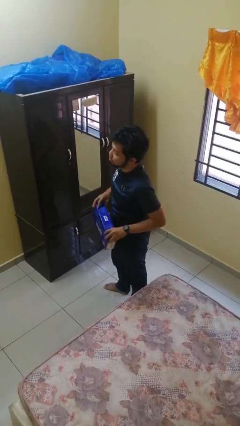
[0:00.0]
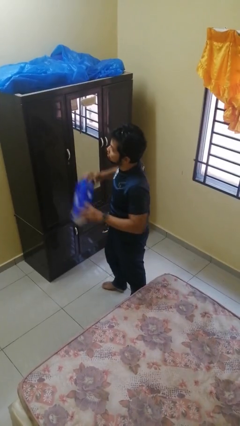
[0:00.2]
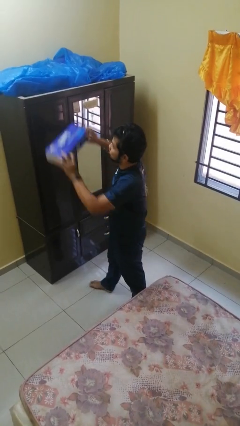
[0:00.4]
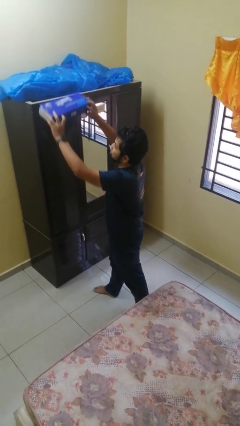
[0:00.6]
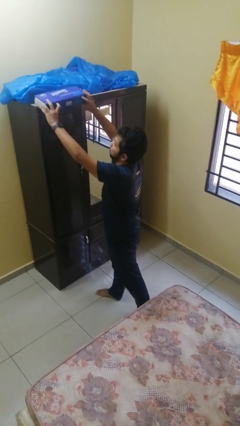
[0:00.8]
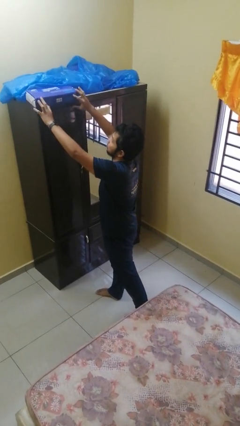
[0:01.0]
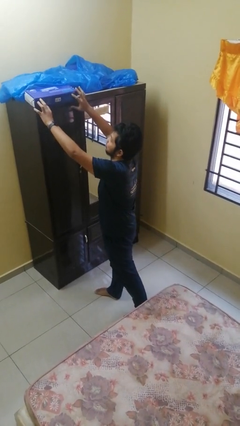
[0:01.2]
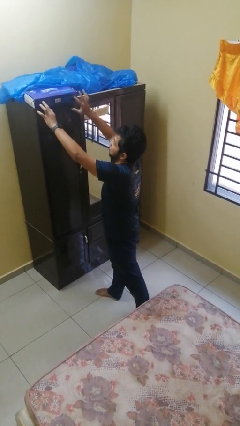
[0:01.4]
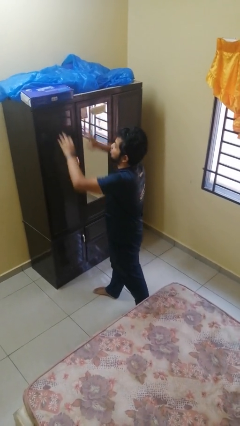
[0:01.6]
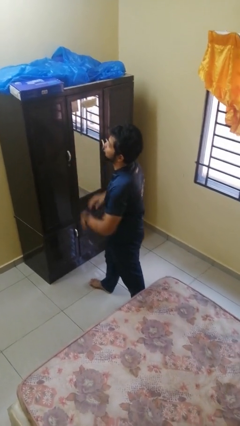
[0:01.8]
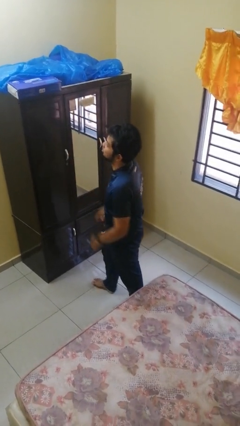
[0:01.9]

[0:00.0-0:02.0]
person puts down object on countertop

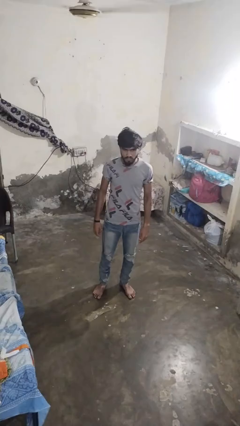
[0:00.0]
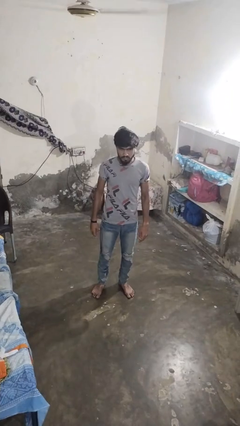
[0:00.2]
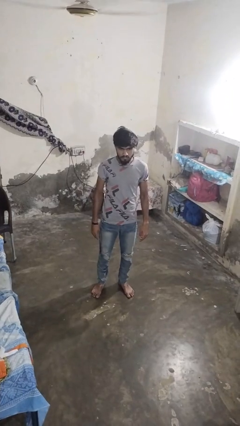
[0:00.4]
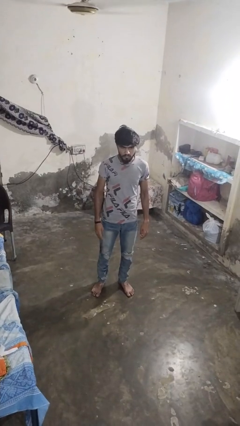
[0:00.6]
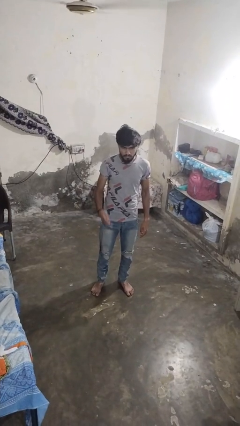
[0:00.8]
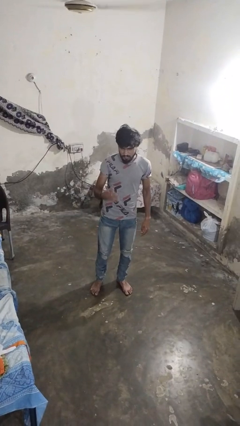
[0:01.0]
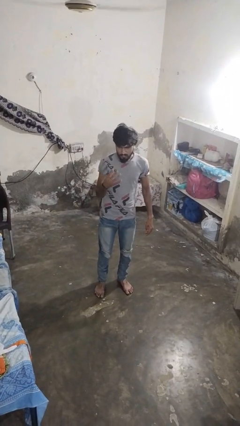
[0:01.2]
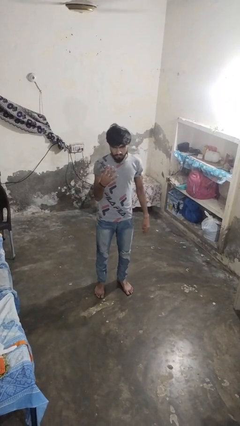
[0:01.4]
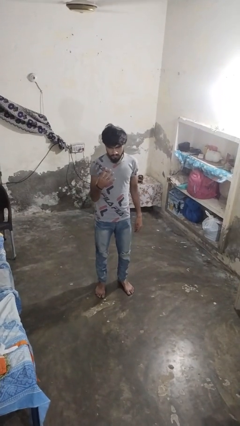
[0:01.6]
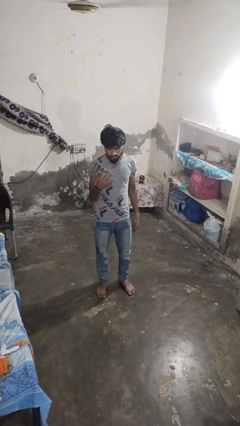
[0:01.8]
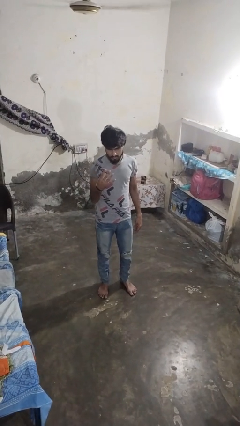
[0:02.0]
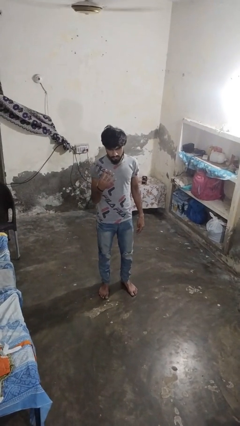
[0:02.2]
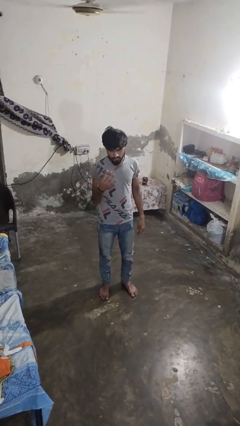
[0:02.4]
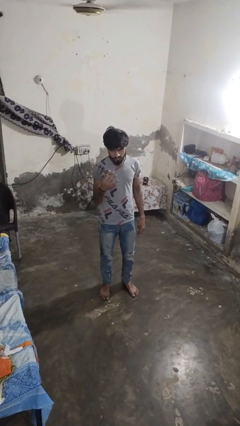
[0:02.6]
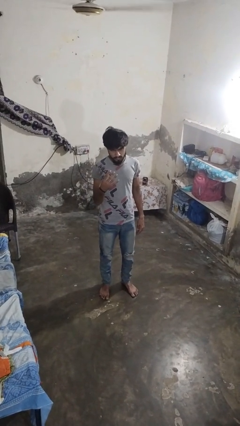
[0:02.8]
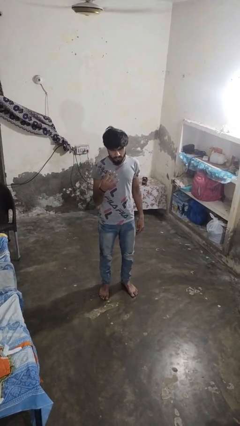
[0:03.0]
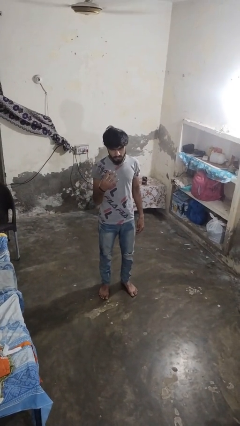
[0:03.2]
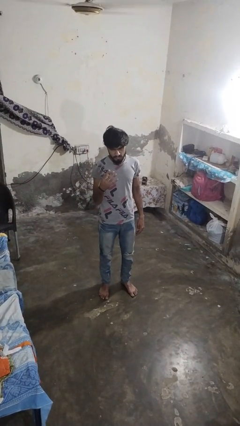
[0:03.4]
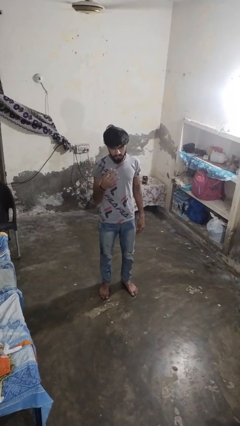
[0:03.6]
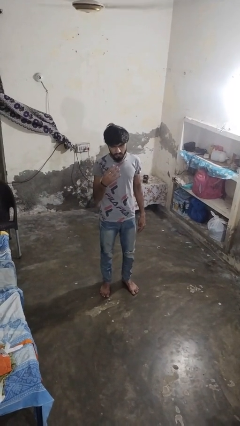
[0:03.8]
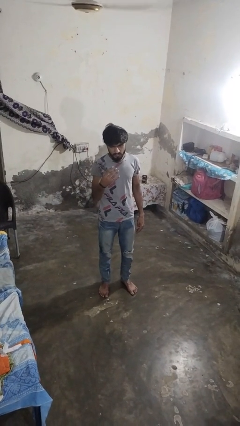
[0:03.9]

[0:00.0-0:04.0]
person gestures number four

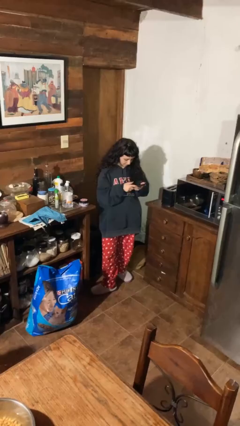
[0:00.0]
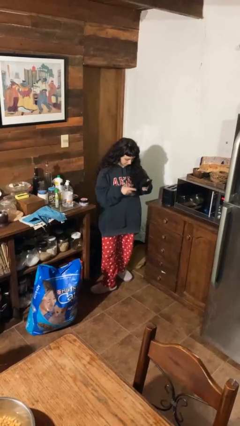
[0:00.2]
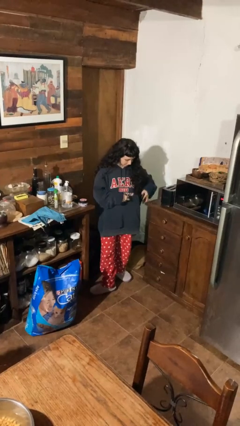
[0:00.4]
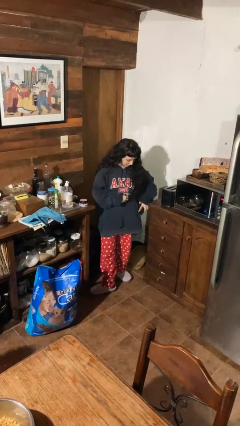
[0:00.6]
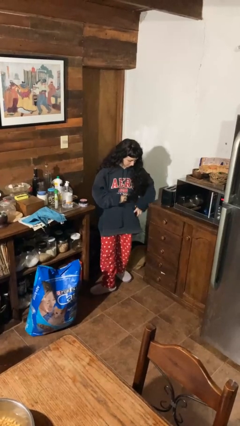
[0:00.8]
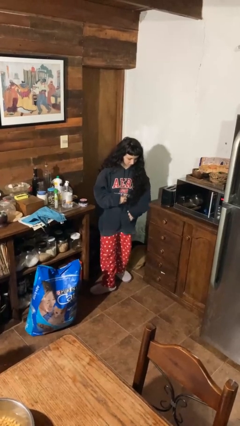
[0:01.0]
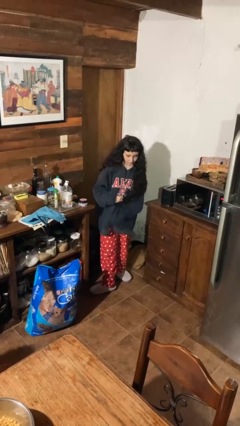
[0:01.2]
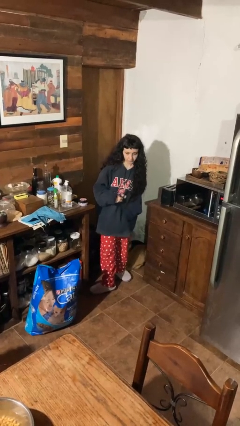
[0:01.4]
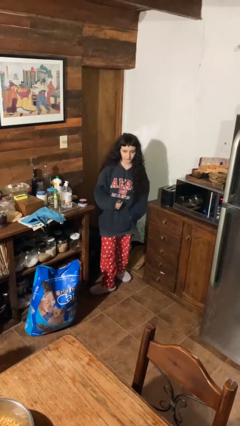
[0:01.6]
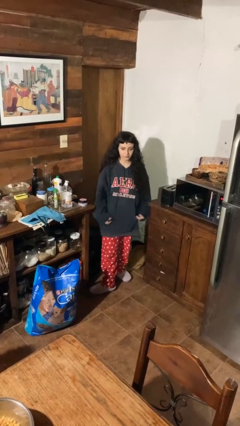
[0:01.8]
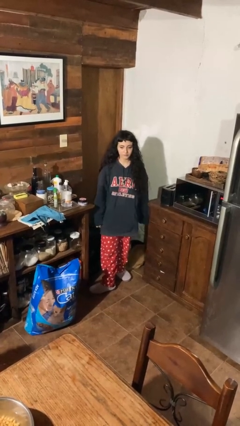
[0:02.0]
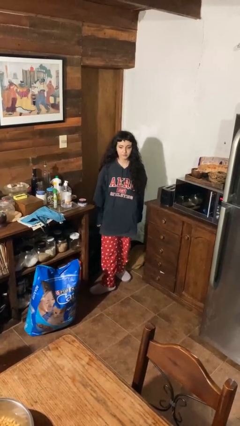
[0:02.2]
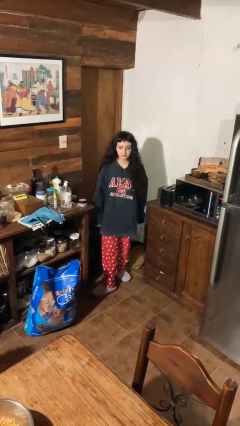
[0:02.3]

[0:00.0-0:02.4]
person puts phone into pocket

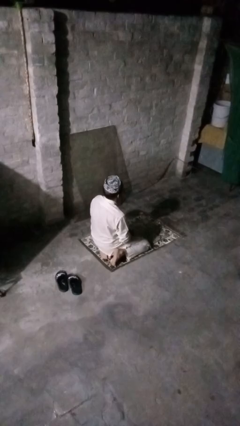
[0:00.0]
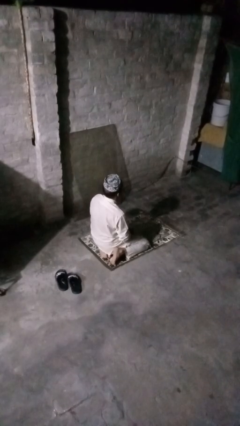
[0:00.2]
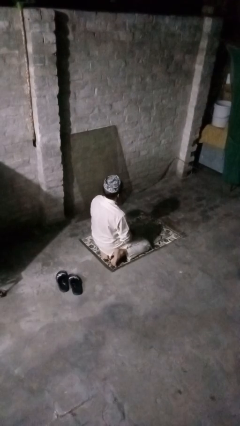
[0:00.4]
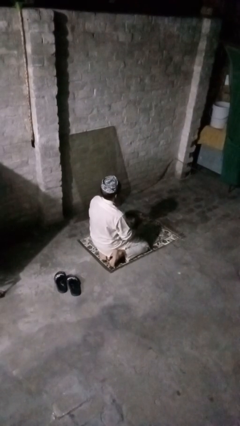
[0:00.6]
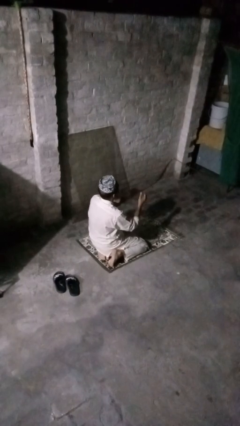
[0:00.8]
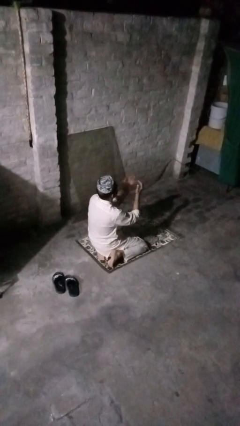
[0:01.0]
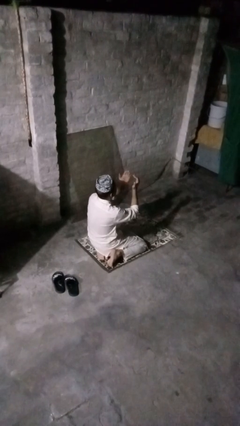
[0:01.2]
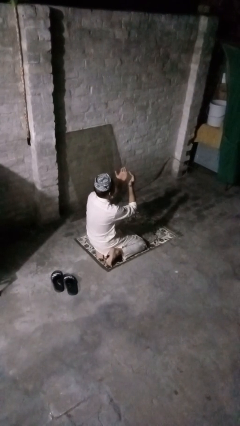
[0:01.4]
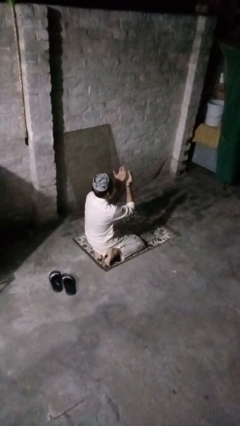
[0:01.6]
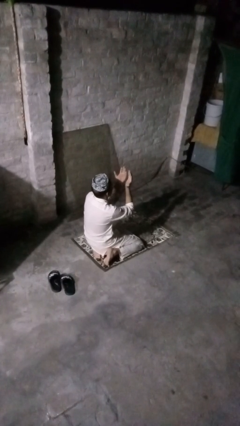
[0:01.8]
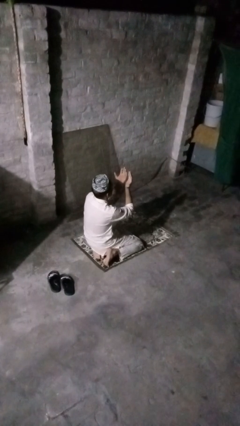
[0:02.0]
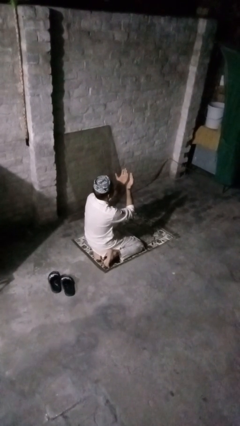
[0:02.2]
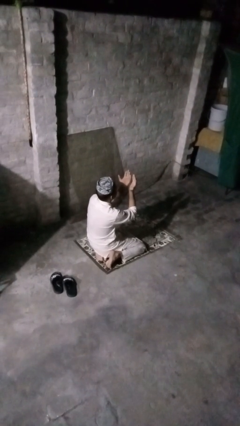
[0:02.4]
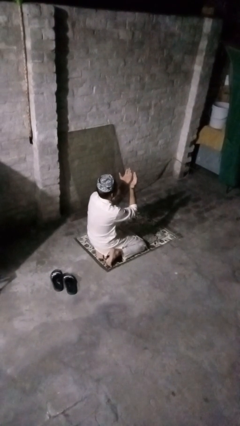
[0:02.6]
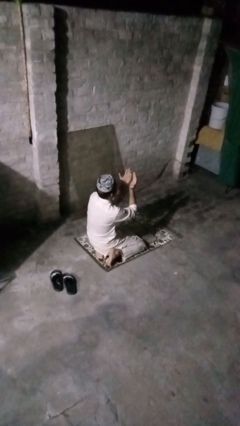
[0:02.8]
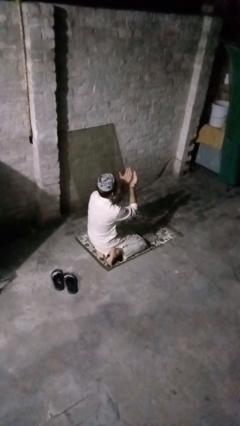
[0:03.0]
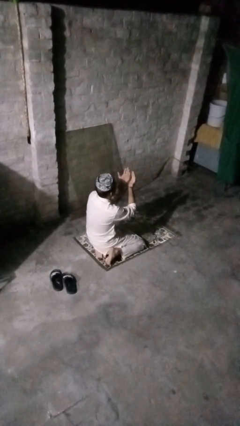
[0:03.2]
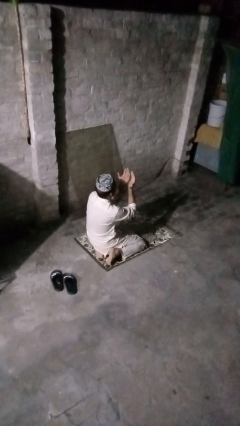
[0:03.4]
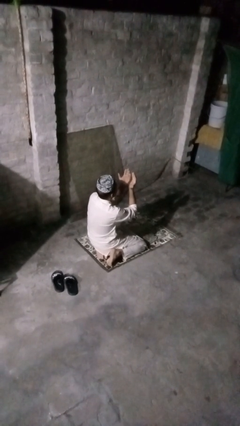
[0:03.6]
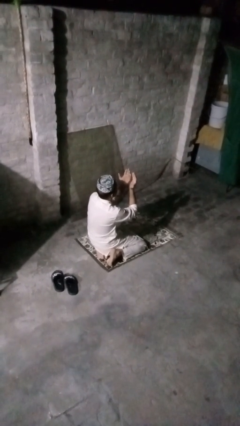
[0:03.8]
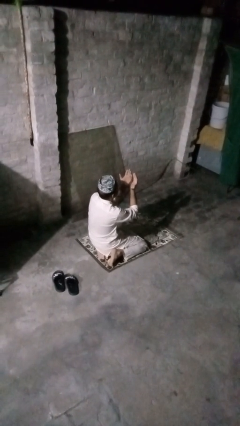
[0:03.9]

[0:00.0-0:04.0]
person prays

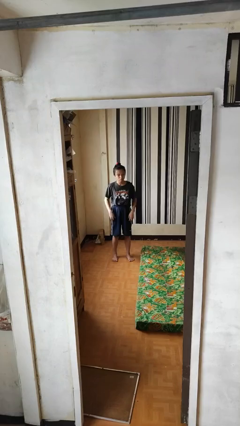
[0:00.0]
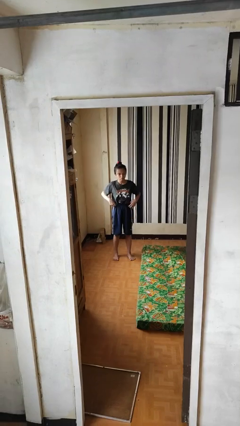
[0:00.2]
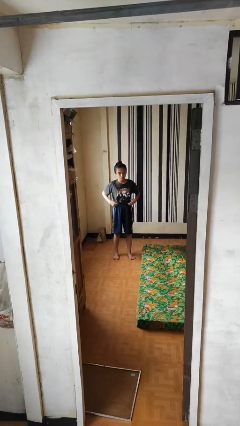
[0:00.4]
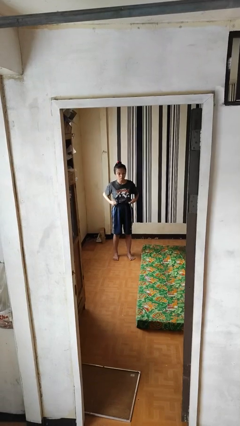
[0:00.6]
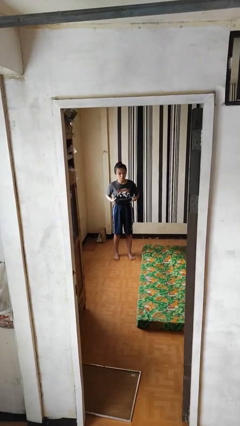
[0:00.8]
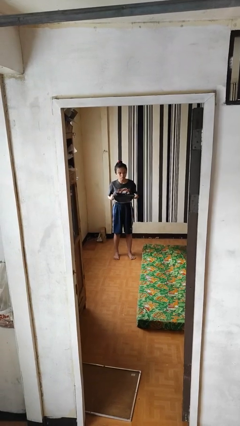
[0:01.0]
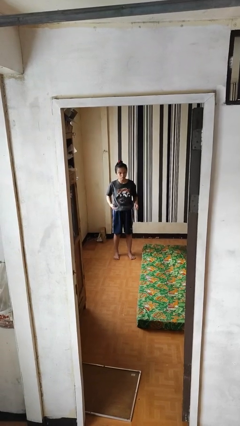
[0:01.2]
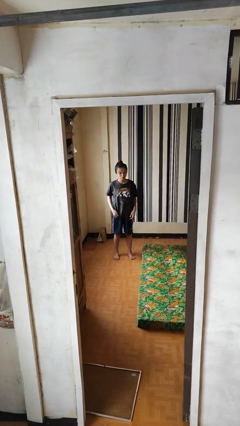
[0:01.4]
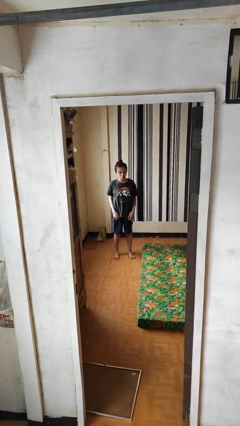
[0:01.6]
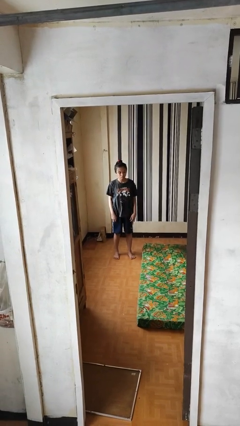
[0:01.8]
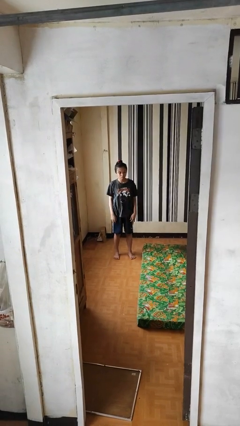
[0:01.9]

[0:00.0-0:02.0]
person untucks shirt

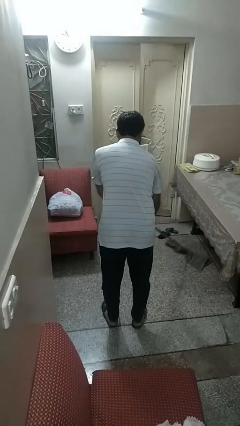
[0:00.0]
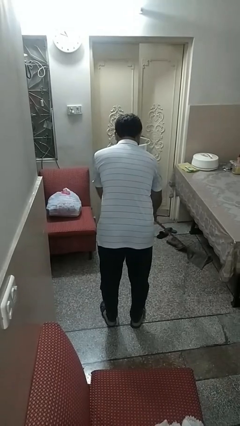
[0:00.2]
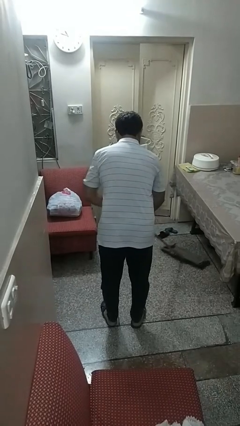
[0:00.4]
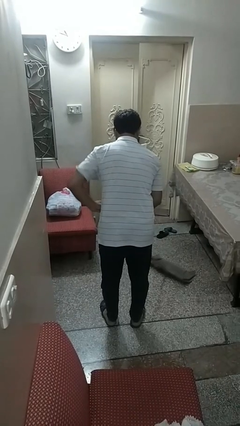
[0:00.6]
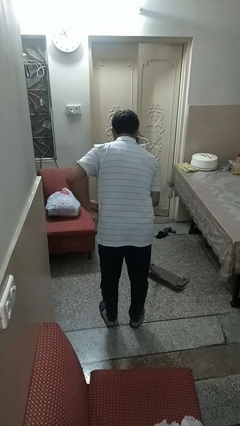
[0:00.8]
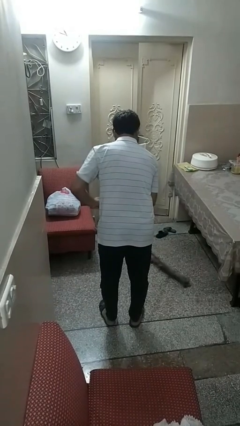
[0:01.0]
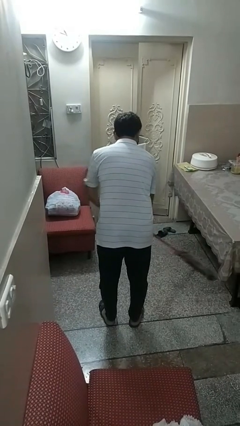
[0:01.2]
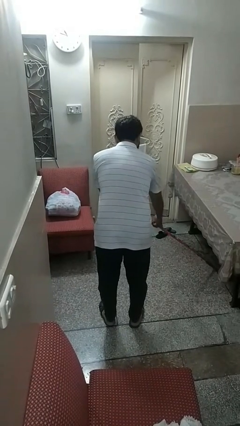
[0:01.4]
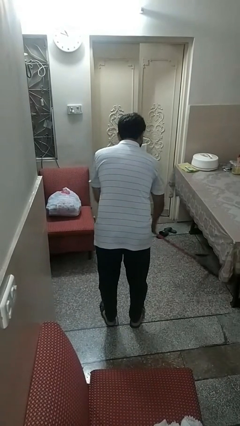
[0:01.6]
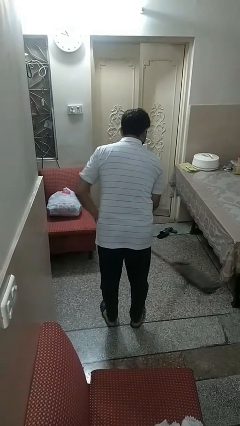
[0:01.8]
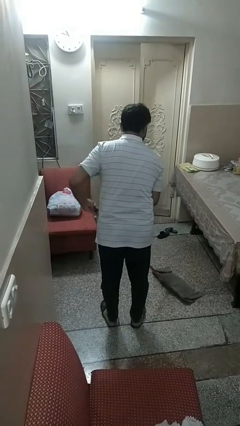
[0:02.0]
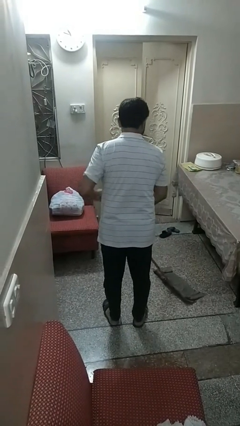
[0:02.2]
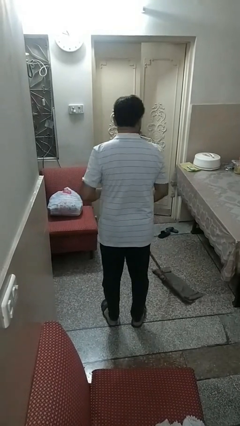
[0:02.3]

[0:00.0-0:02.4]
person mops
